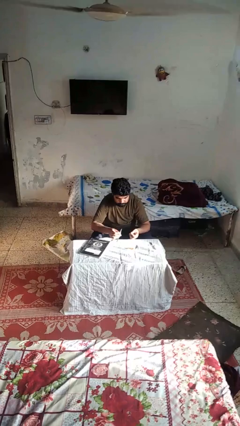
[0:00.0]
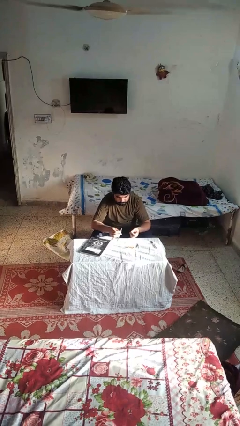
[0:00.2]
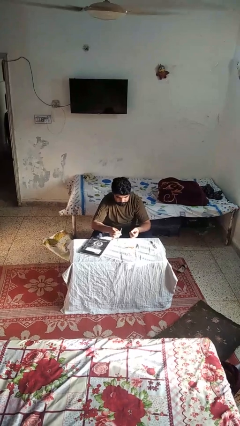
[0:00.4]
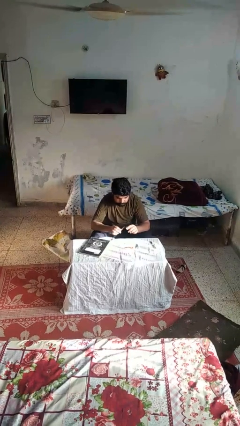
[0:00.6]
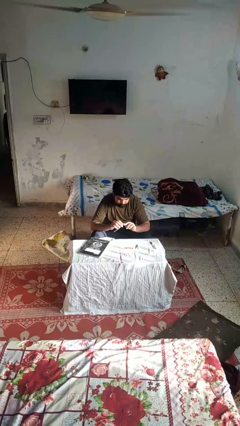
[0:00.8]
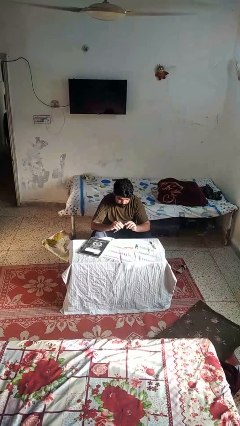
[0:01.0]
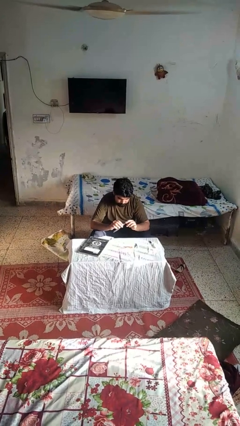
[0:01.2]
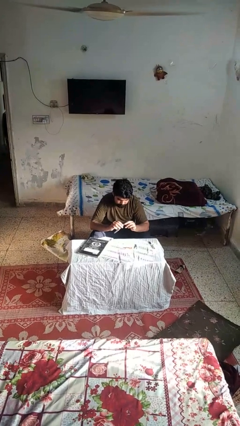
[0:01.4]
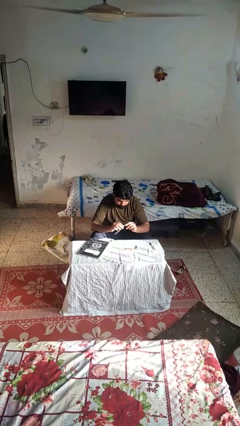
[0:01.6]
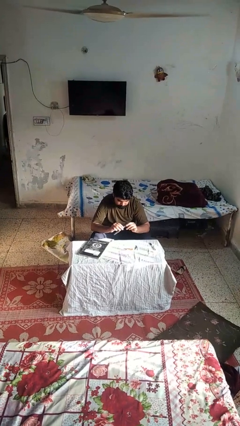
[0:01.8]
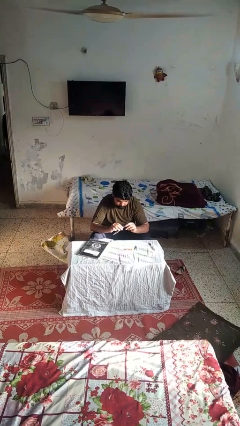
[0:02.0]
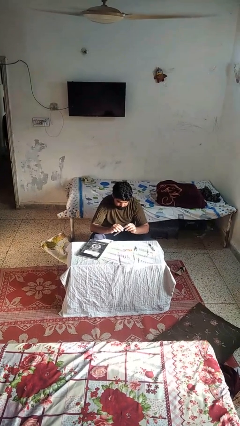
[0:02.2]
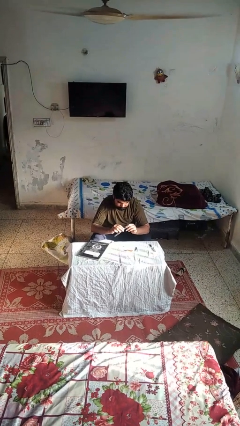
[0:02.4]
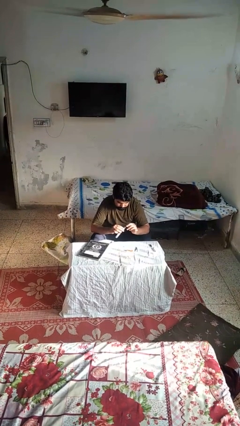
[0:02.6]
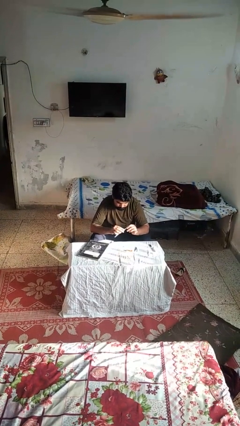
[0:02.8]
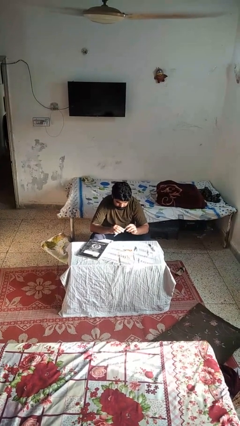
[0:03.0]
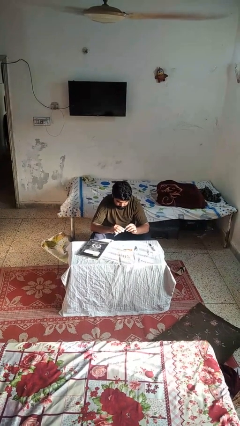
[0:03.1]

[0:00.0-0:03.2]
person files fingernails

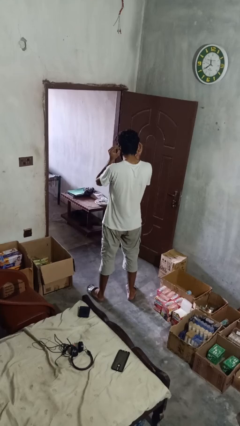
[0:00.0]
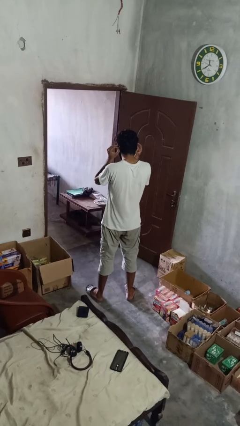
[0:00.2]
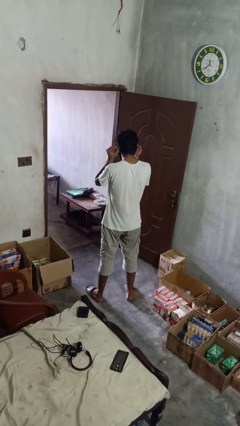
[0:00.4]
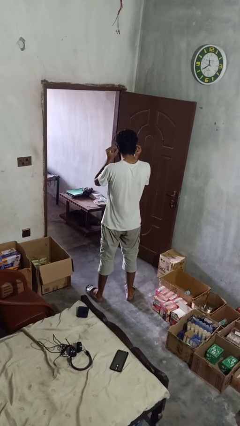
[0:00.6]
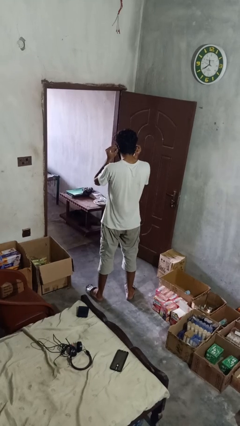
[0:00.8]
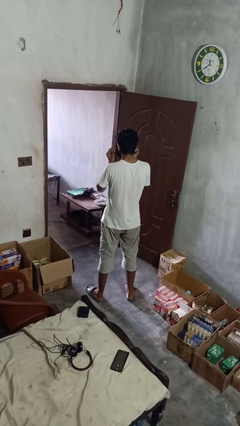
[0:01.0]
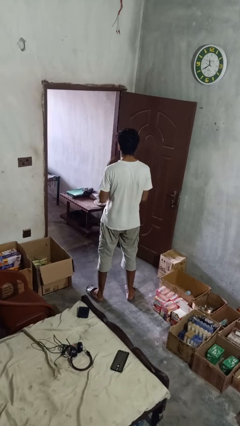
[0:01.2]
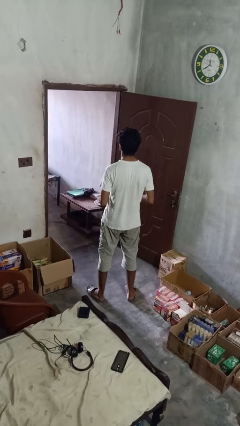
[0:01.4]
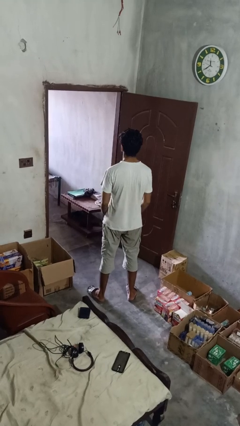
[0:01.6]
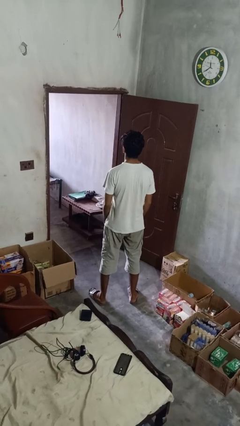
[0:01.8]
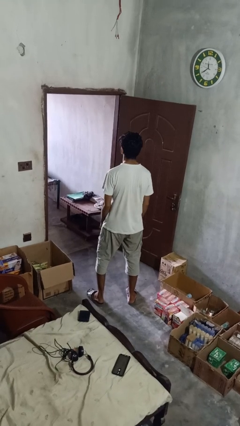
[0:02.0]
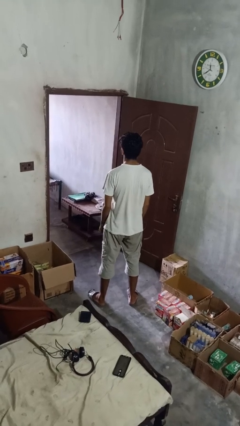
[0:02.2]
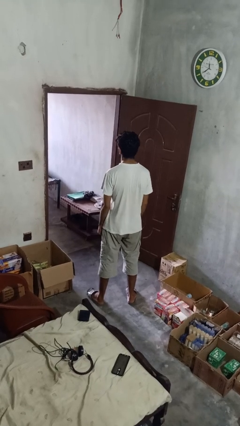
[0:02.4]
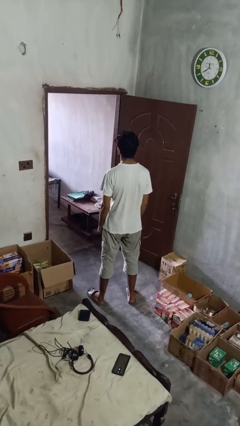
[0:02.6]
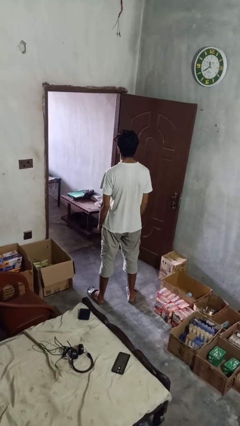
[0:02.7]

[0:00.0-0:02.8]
person takes off facemask

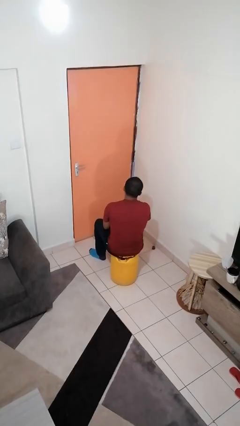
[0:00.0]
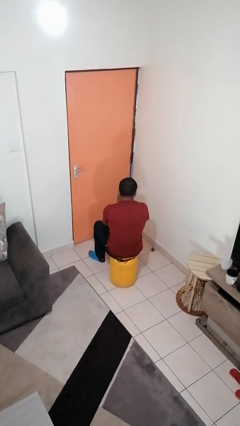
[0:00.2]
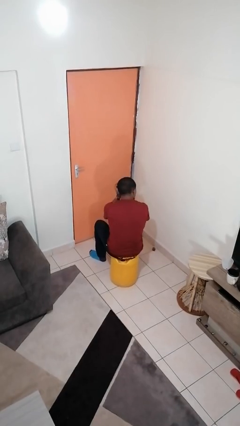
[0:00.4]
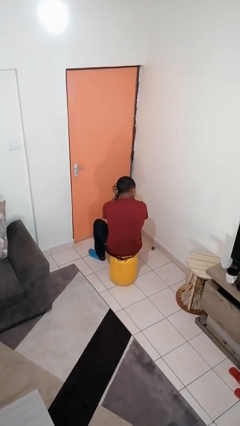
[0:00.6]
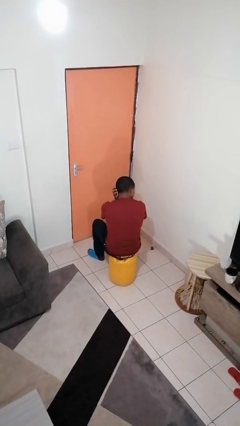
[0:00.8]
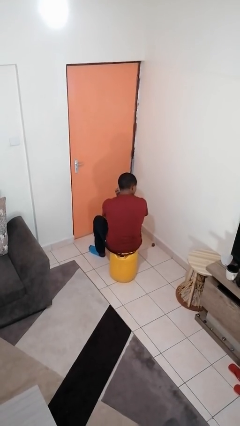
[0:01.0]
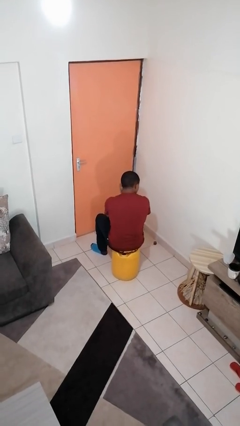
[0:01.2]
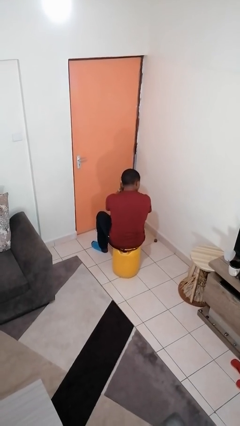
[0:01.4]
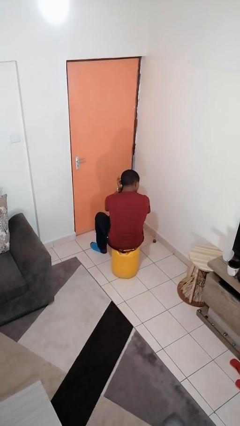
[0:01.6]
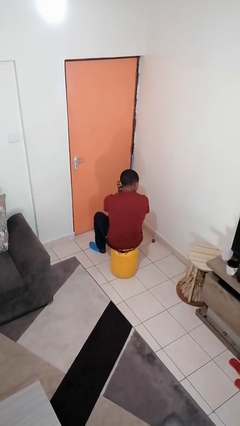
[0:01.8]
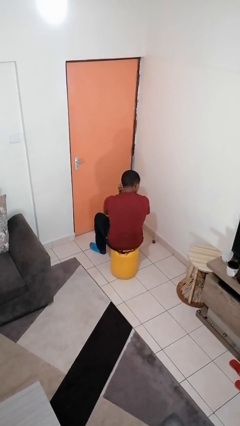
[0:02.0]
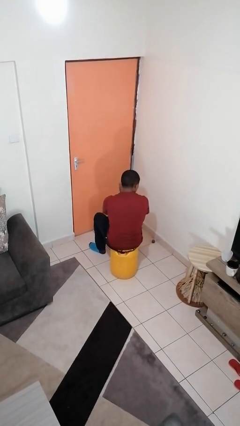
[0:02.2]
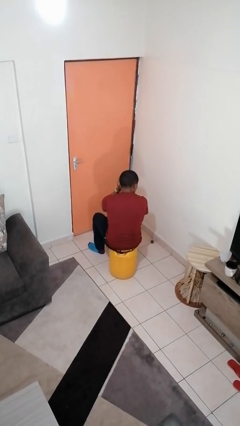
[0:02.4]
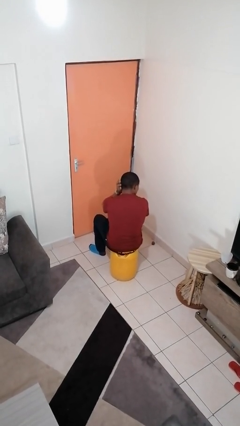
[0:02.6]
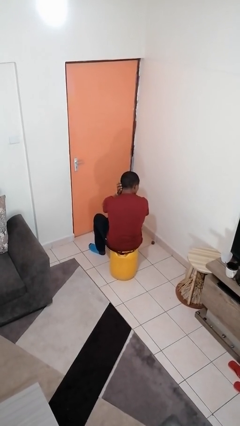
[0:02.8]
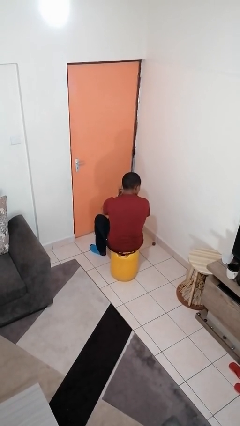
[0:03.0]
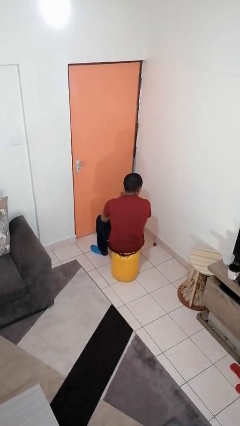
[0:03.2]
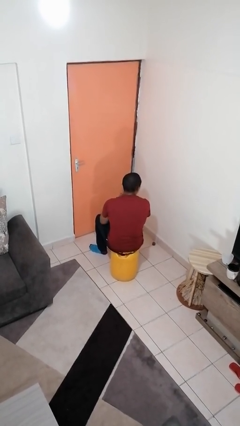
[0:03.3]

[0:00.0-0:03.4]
person strokes hair

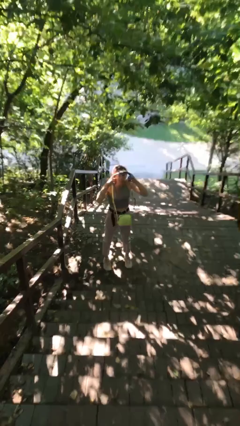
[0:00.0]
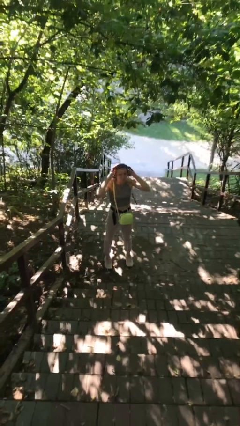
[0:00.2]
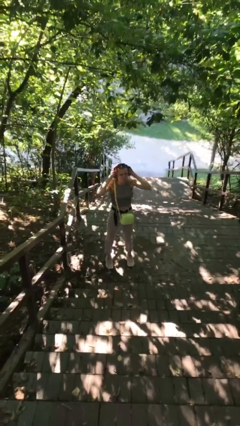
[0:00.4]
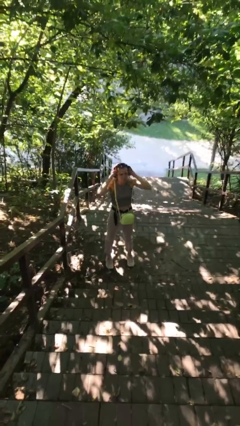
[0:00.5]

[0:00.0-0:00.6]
person puts on headphones

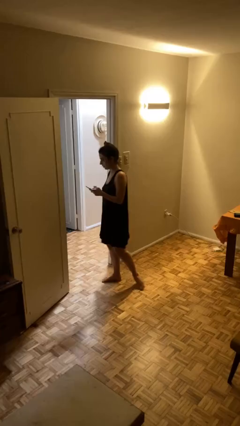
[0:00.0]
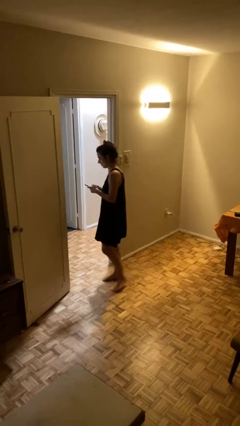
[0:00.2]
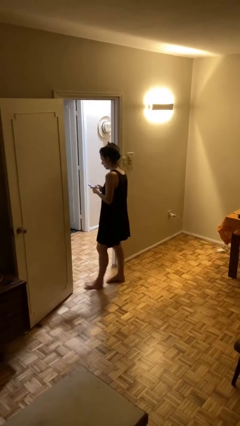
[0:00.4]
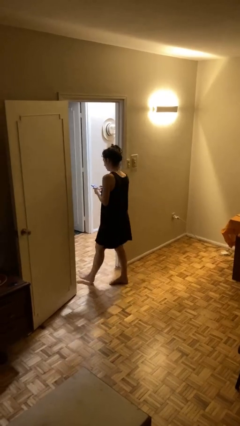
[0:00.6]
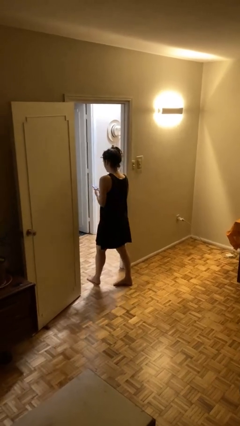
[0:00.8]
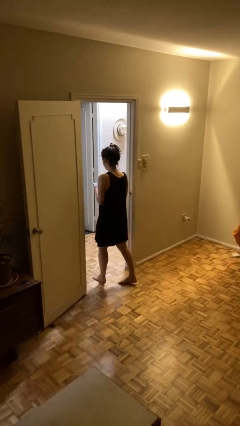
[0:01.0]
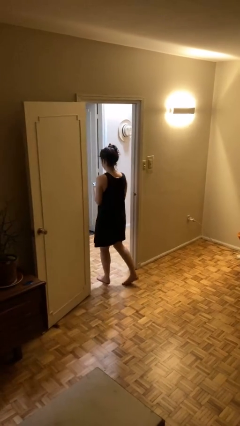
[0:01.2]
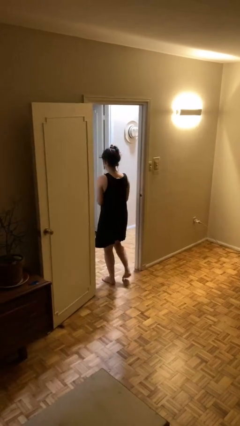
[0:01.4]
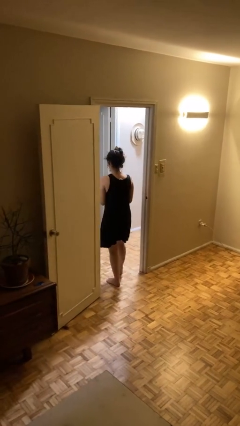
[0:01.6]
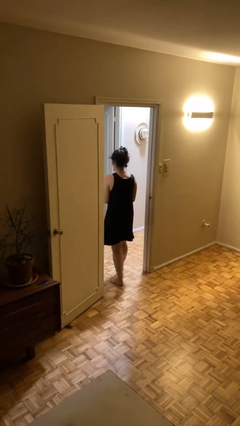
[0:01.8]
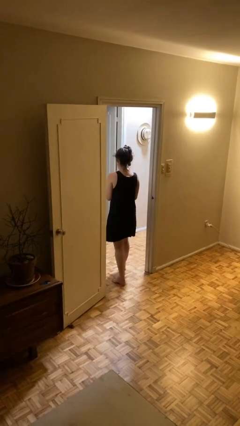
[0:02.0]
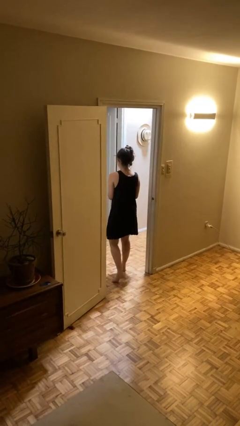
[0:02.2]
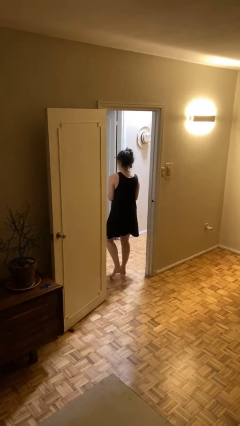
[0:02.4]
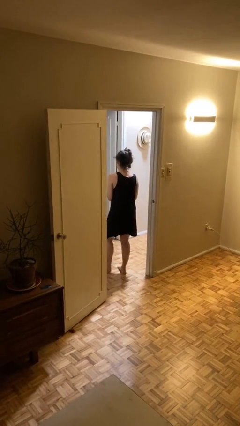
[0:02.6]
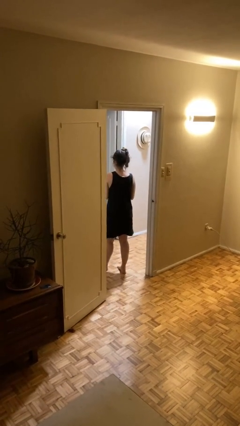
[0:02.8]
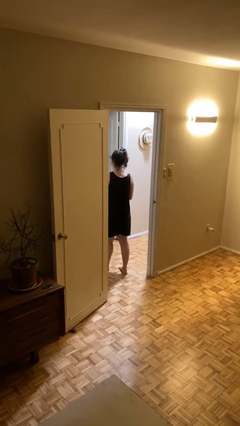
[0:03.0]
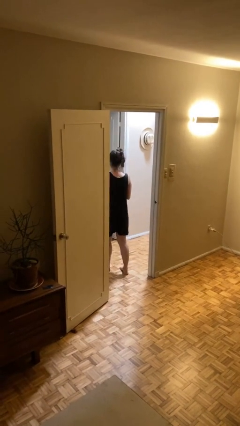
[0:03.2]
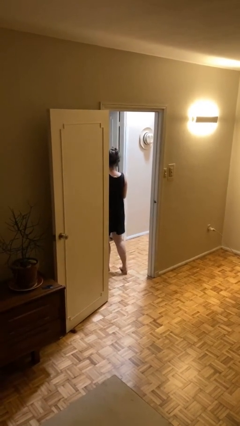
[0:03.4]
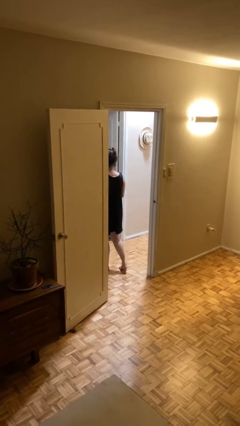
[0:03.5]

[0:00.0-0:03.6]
person exits scene through structure

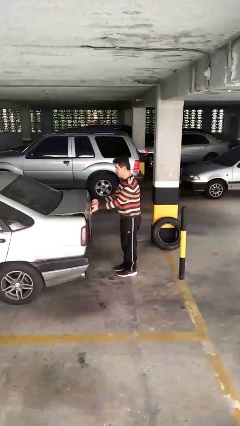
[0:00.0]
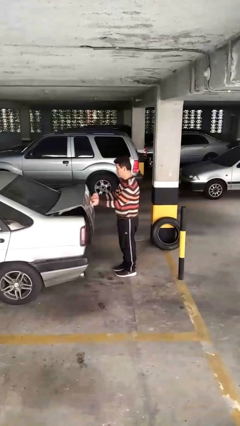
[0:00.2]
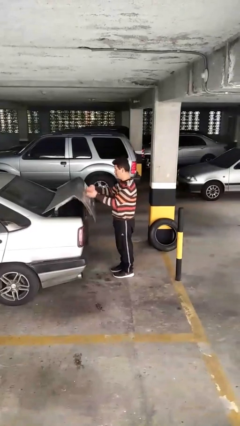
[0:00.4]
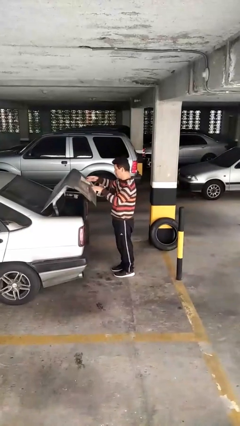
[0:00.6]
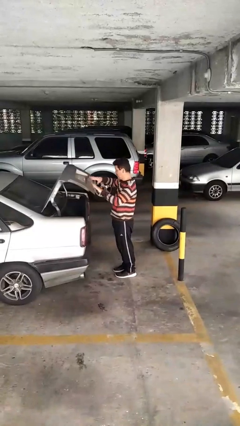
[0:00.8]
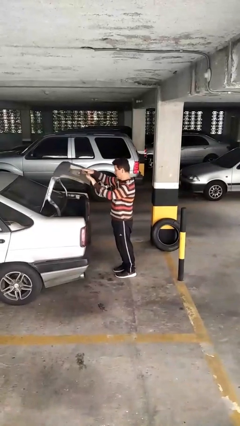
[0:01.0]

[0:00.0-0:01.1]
person opens car trunk

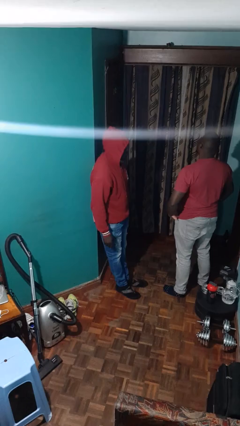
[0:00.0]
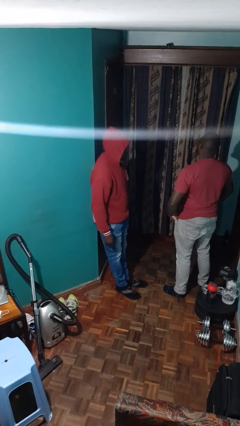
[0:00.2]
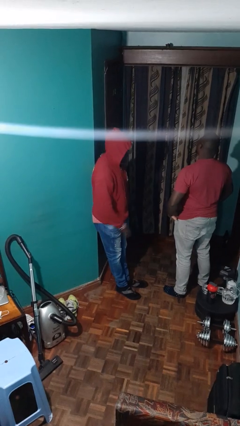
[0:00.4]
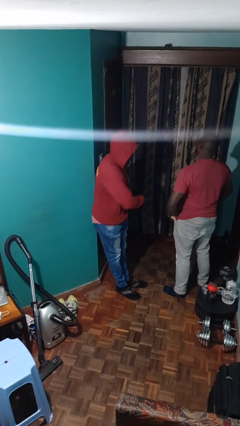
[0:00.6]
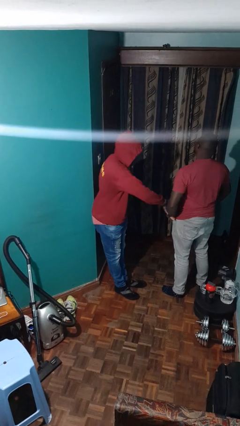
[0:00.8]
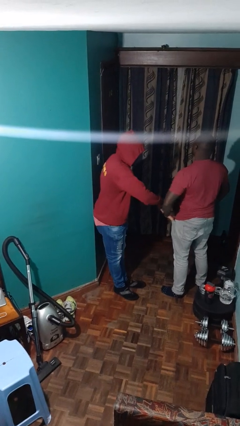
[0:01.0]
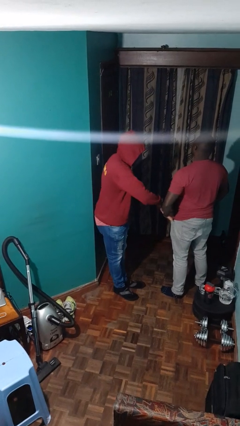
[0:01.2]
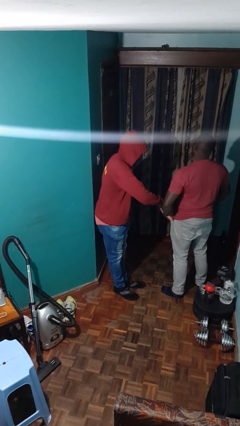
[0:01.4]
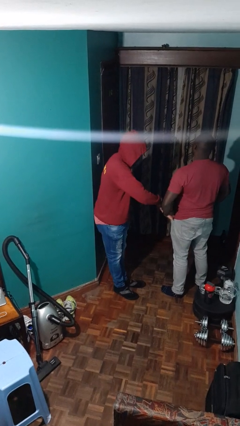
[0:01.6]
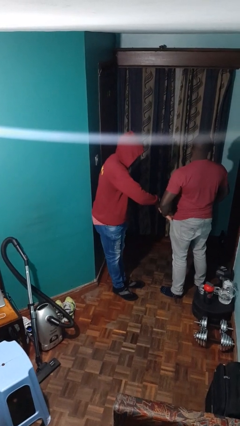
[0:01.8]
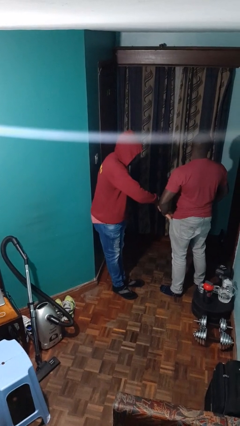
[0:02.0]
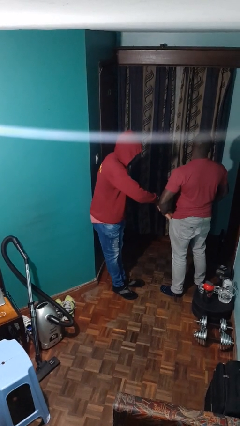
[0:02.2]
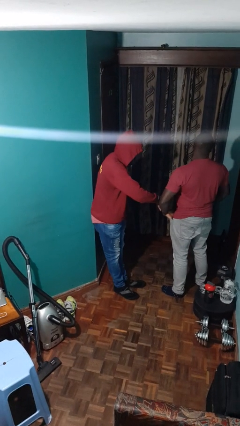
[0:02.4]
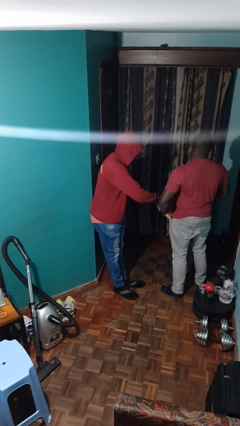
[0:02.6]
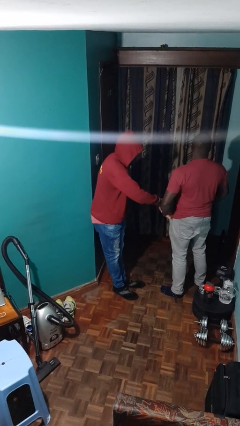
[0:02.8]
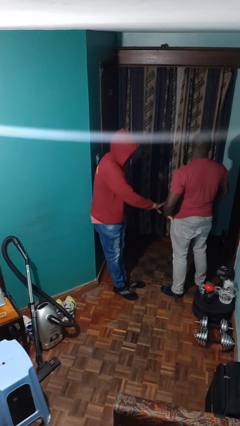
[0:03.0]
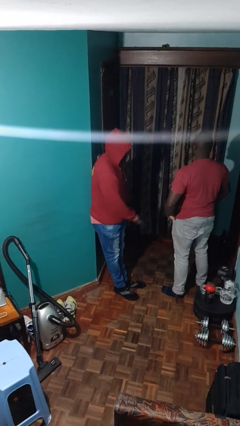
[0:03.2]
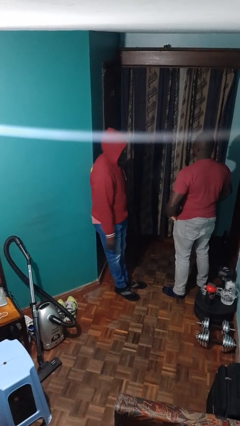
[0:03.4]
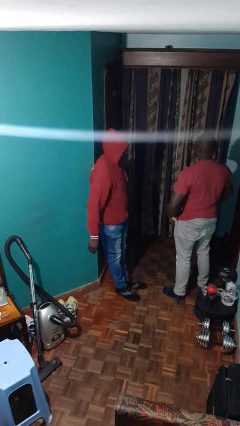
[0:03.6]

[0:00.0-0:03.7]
person grabs person by forearm
